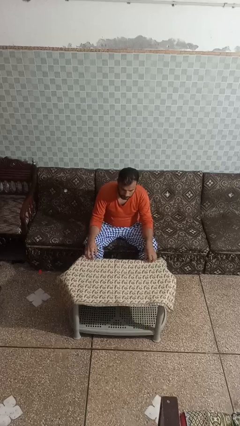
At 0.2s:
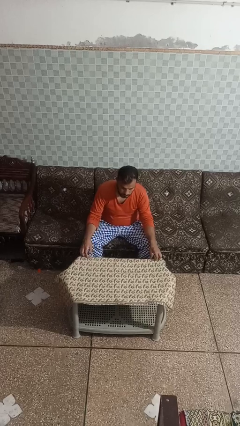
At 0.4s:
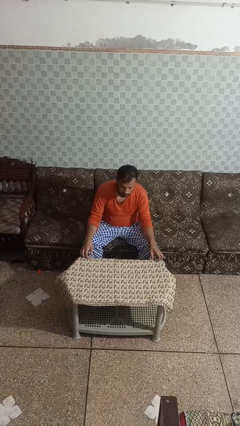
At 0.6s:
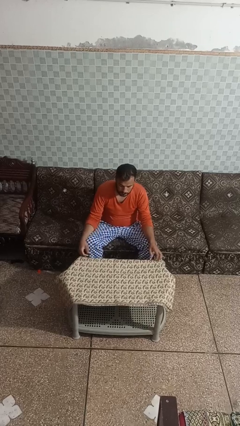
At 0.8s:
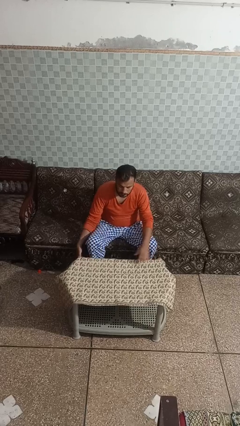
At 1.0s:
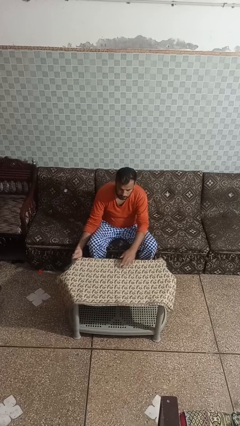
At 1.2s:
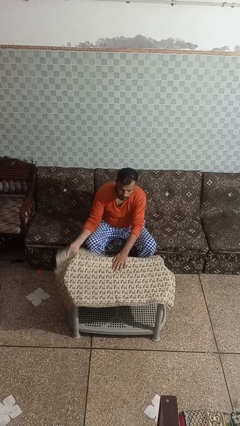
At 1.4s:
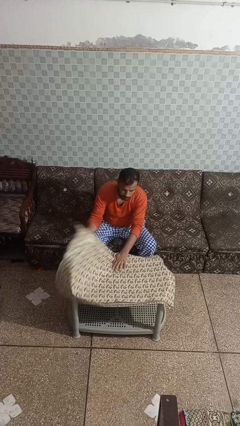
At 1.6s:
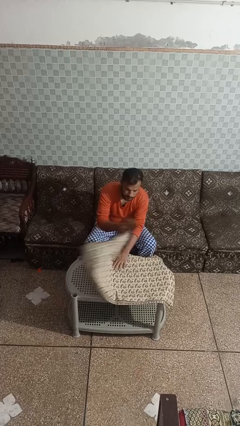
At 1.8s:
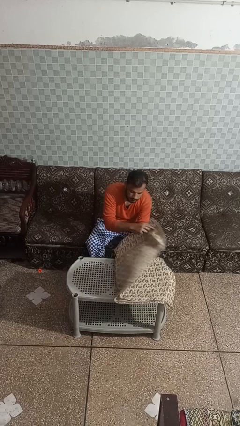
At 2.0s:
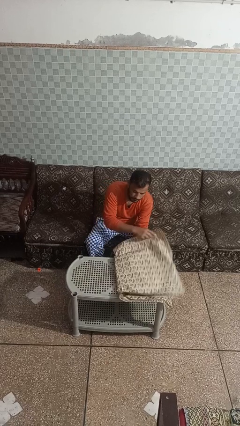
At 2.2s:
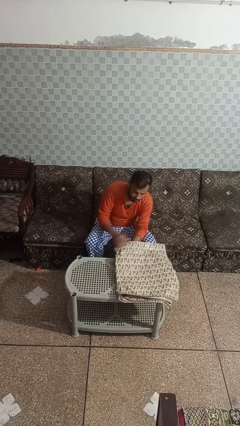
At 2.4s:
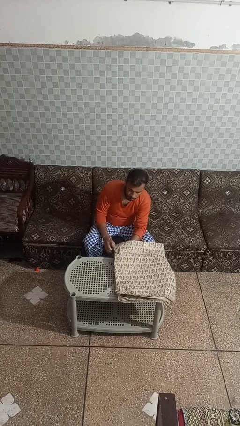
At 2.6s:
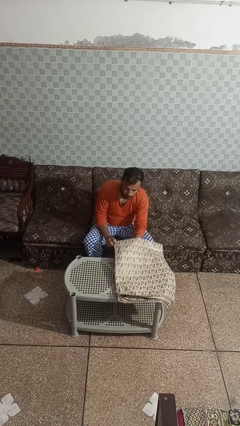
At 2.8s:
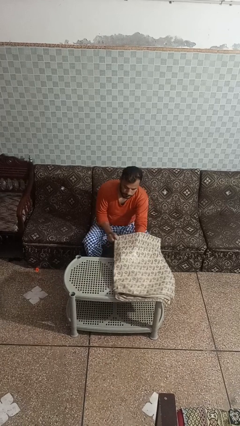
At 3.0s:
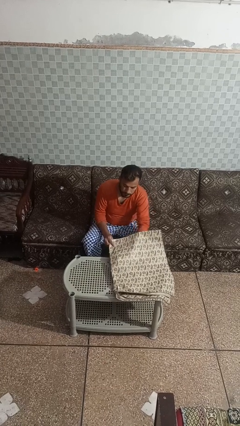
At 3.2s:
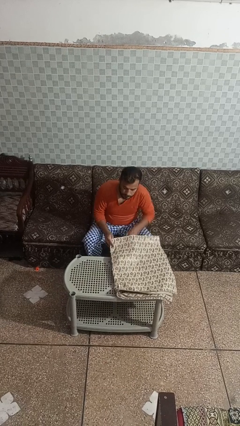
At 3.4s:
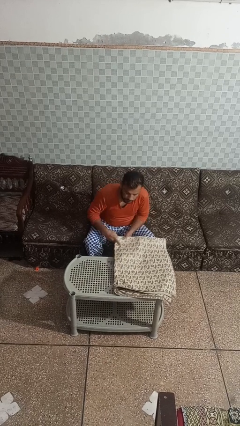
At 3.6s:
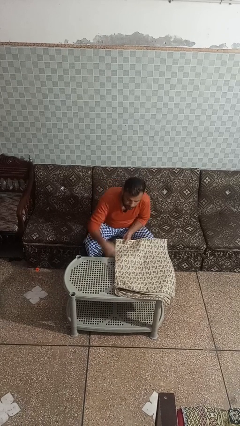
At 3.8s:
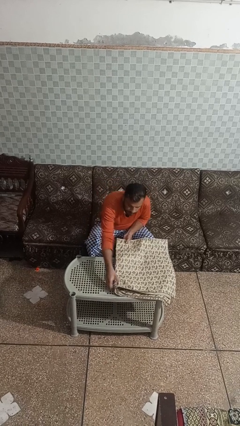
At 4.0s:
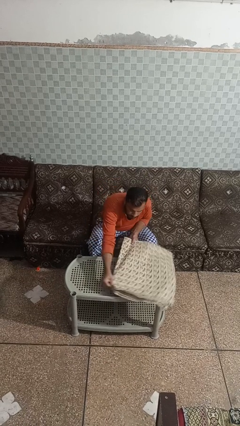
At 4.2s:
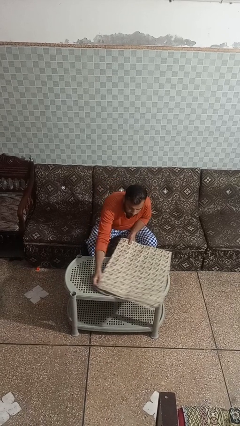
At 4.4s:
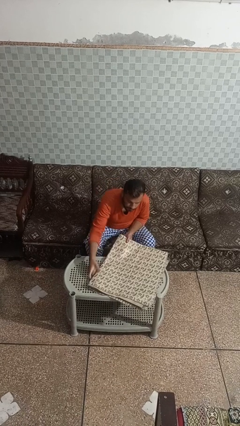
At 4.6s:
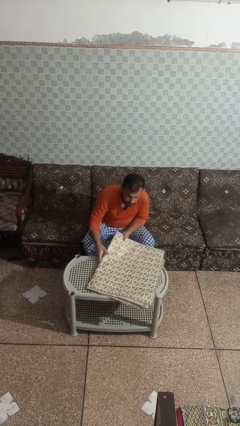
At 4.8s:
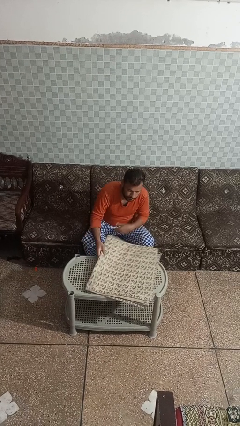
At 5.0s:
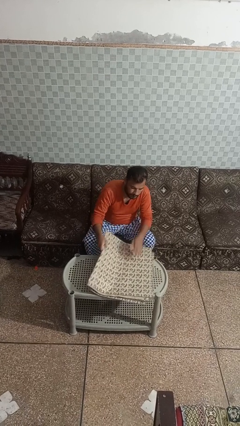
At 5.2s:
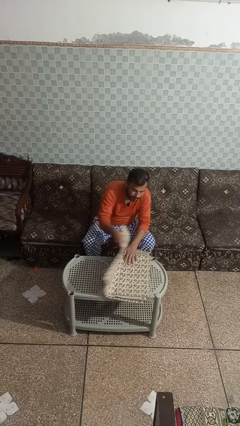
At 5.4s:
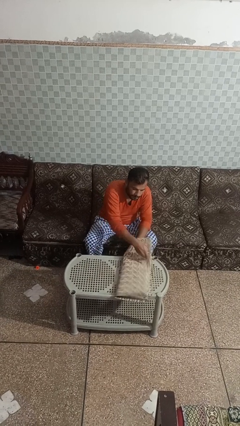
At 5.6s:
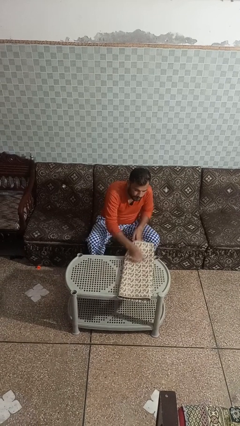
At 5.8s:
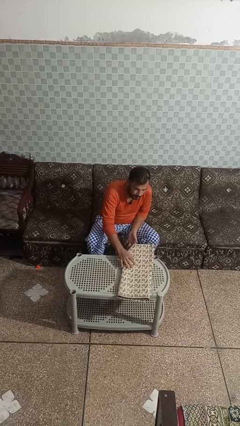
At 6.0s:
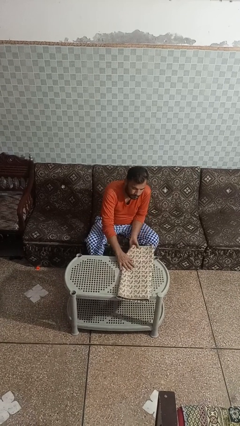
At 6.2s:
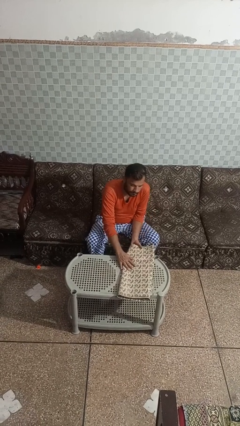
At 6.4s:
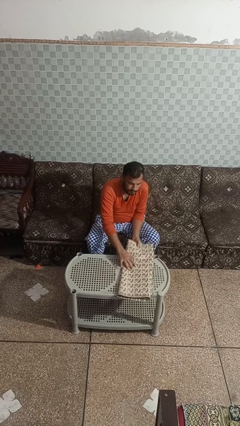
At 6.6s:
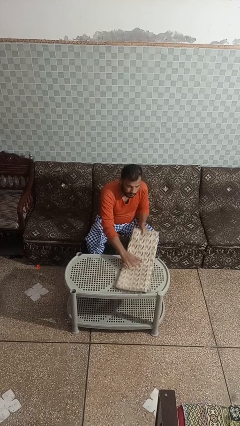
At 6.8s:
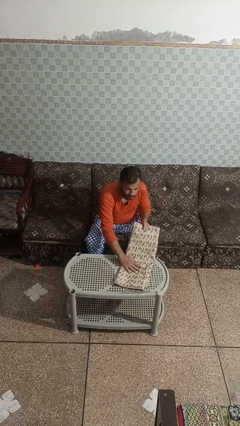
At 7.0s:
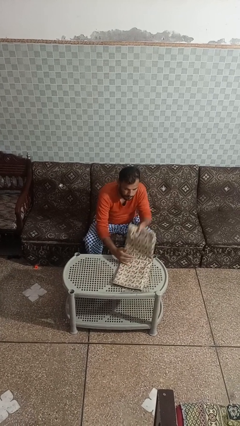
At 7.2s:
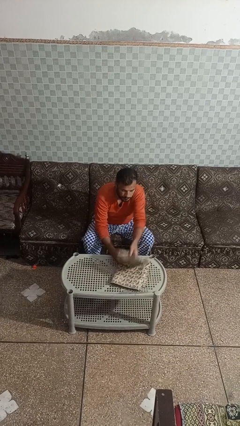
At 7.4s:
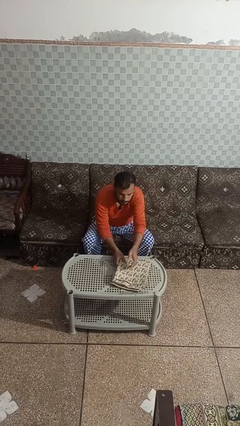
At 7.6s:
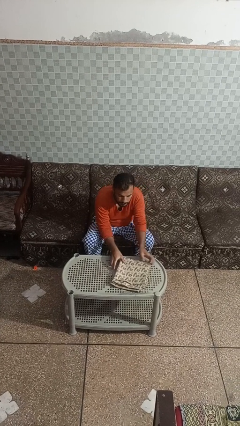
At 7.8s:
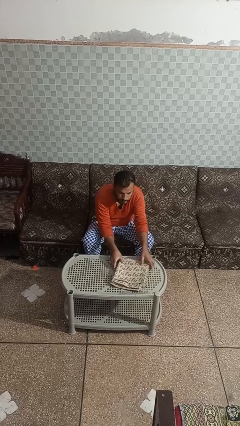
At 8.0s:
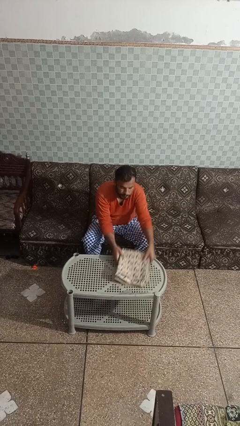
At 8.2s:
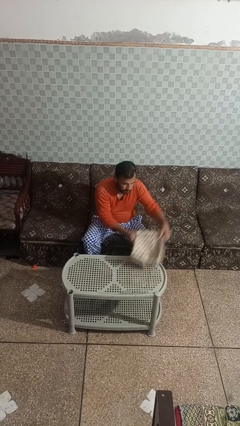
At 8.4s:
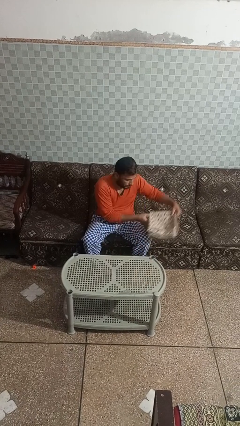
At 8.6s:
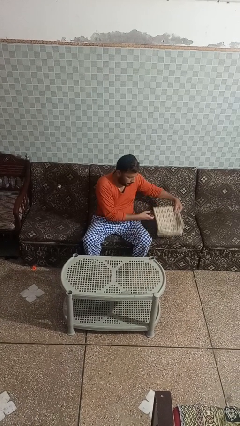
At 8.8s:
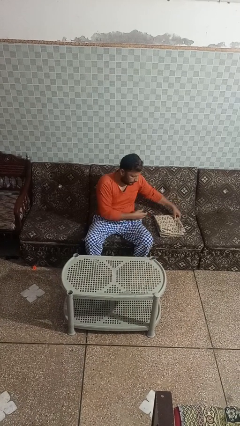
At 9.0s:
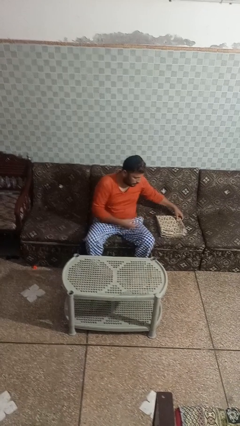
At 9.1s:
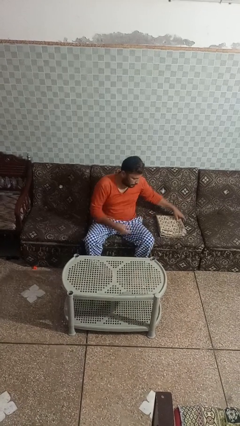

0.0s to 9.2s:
person folds tablecloth

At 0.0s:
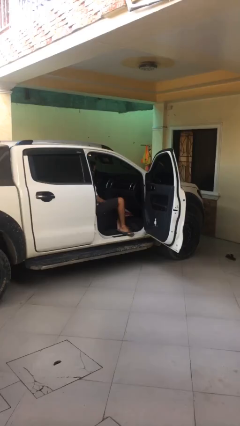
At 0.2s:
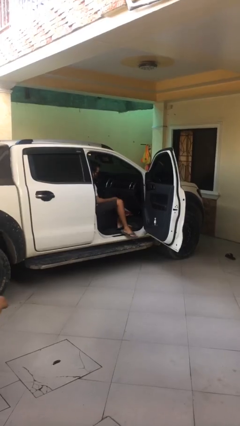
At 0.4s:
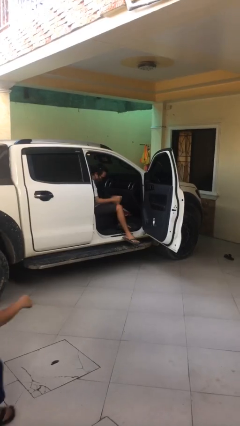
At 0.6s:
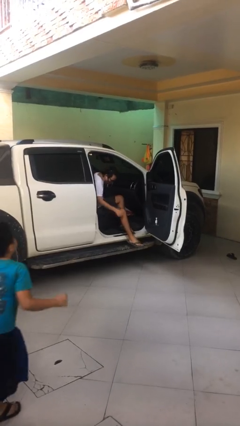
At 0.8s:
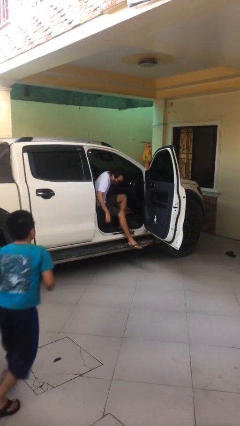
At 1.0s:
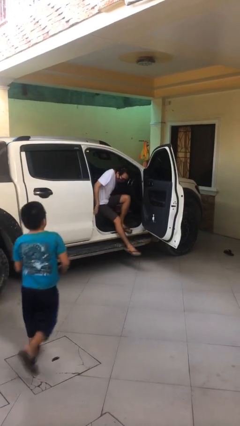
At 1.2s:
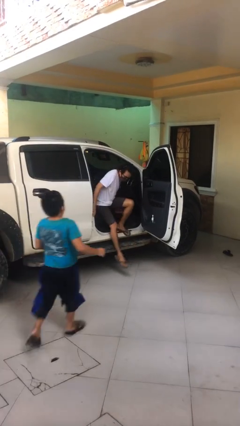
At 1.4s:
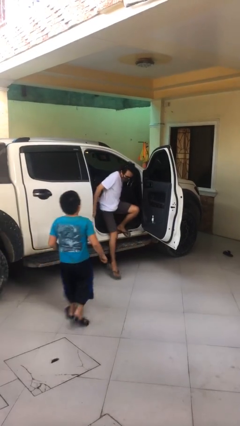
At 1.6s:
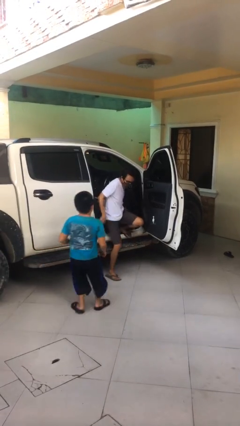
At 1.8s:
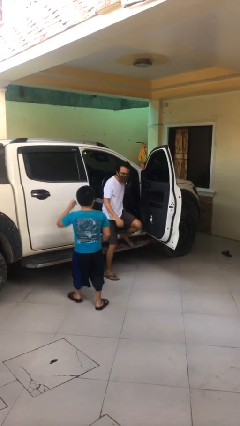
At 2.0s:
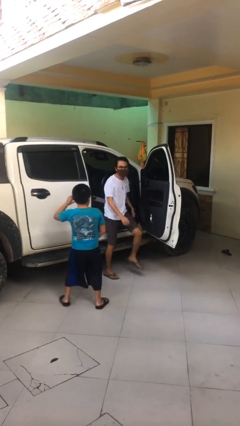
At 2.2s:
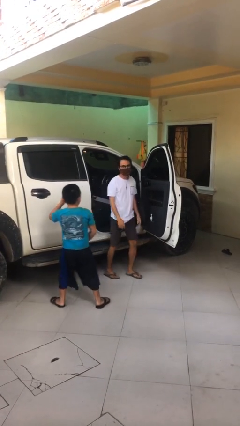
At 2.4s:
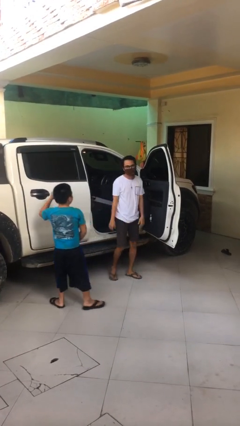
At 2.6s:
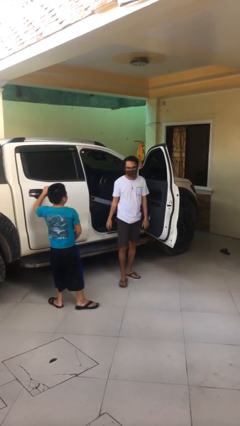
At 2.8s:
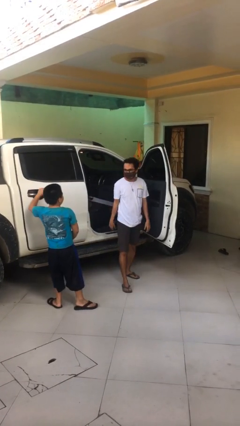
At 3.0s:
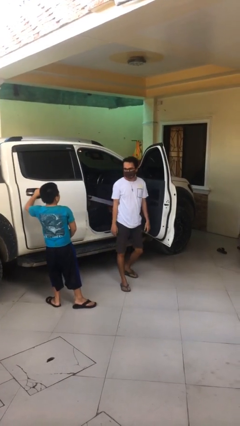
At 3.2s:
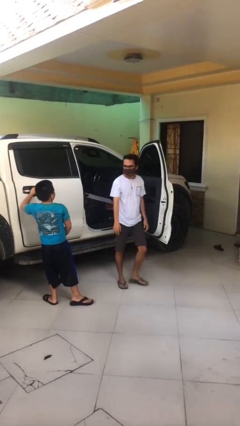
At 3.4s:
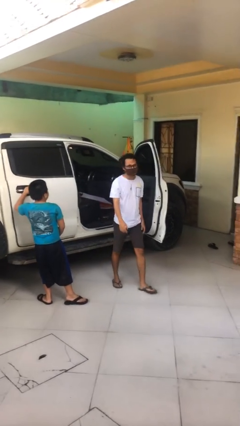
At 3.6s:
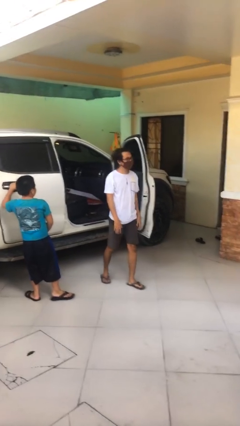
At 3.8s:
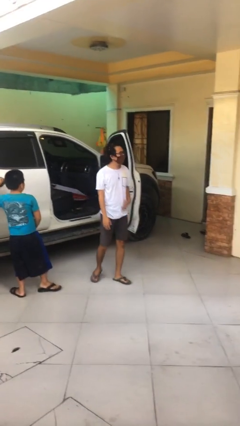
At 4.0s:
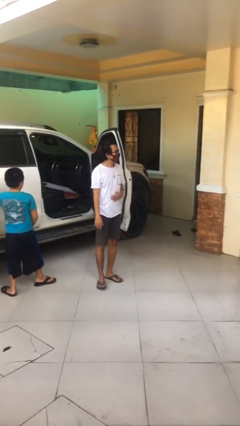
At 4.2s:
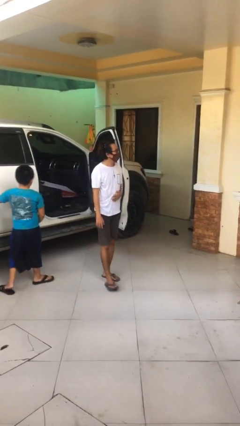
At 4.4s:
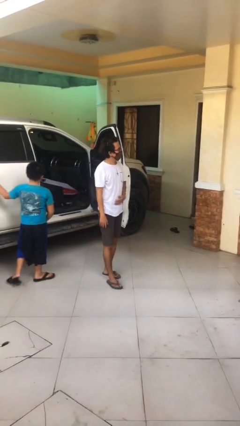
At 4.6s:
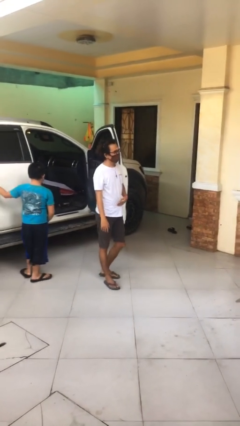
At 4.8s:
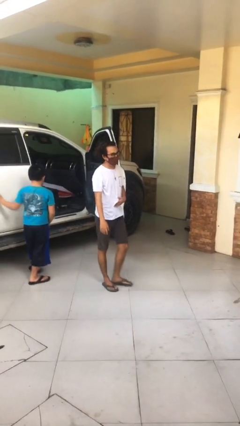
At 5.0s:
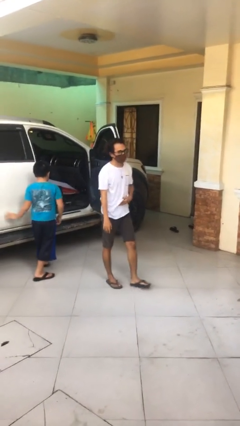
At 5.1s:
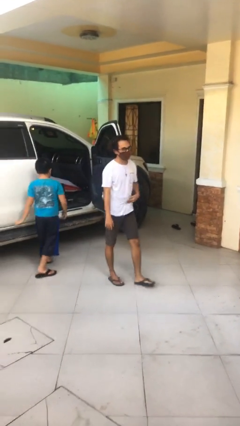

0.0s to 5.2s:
person exits car

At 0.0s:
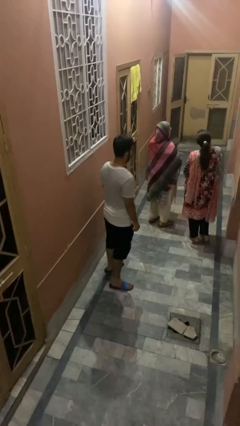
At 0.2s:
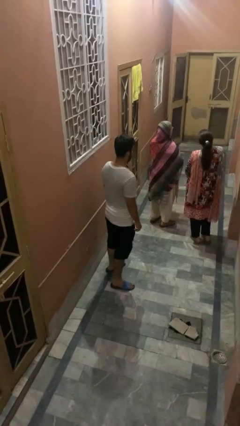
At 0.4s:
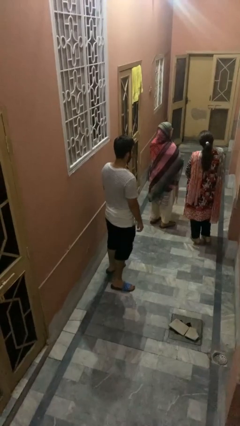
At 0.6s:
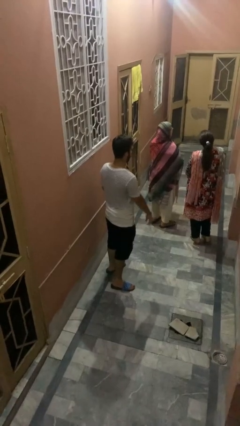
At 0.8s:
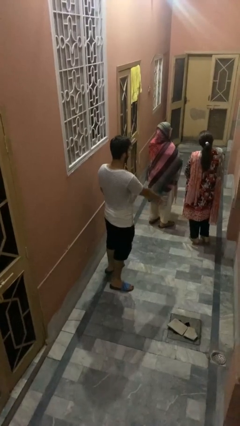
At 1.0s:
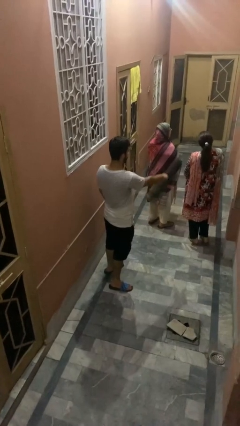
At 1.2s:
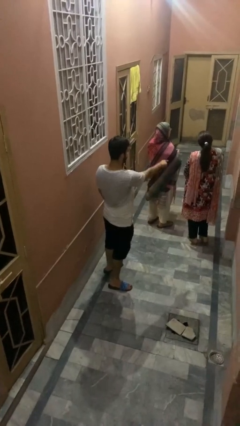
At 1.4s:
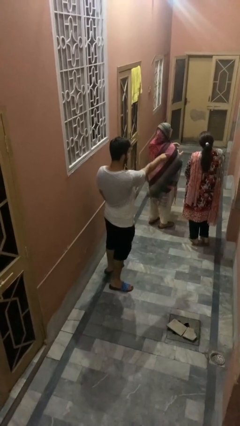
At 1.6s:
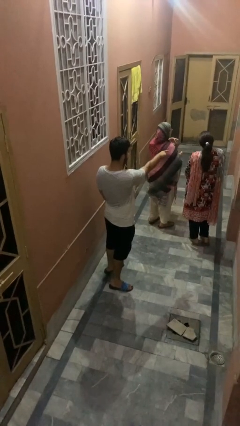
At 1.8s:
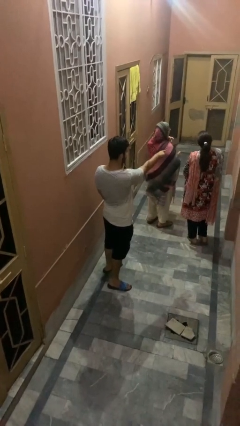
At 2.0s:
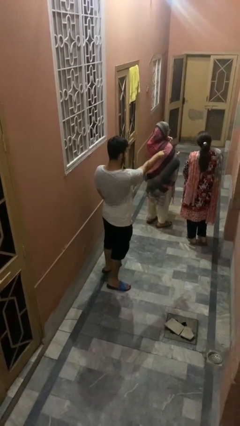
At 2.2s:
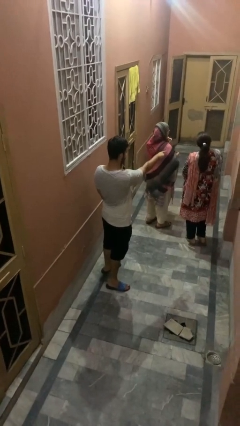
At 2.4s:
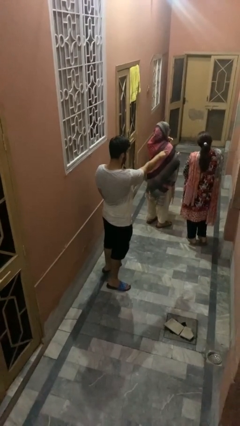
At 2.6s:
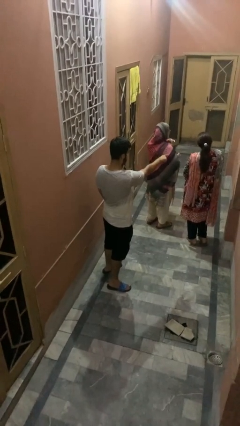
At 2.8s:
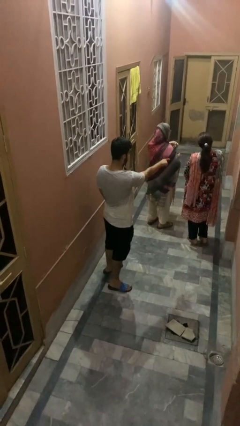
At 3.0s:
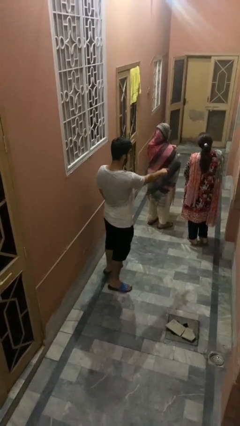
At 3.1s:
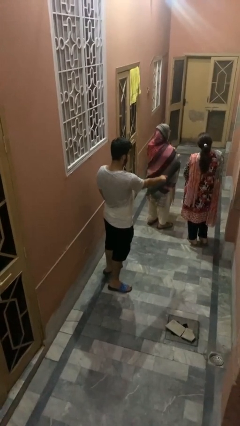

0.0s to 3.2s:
person points at person

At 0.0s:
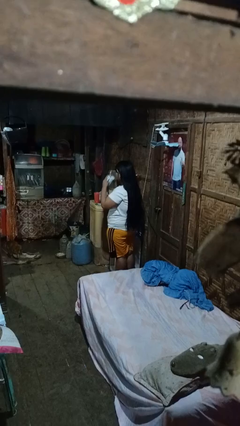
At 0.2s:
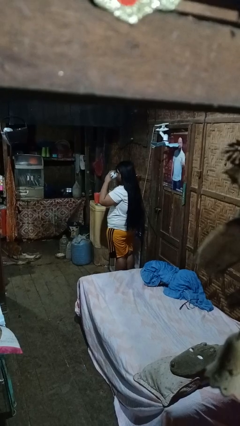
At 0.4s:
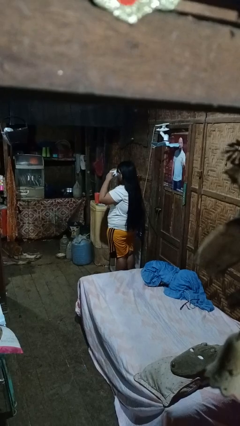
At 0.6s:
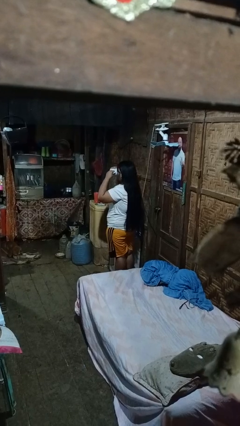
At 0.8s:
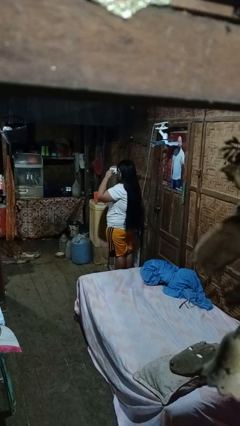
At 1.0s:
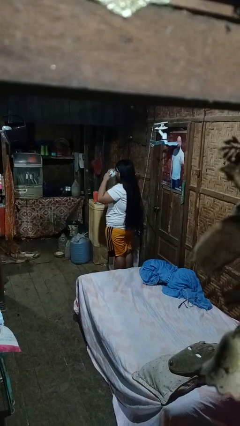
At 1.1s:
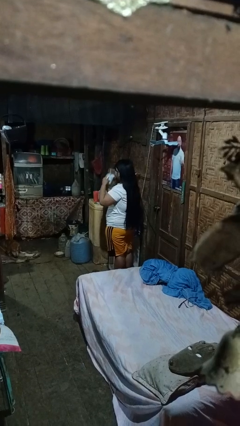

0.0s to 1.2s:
person drinks from mug
